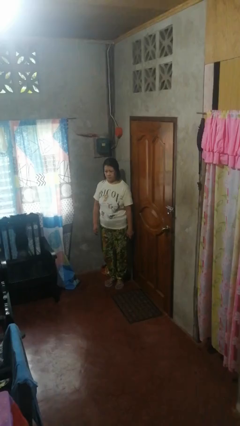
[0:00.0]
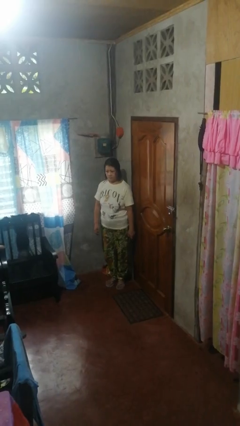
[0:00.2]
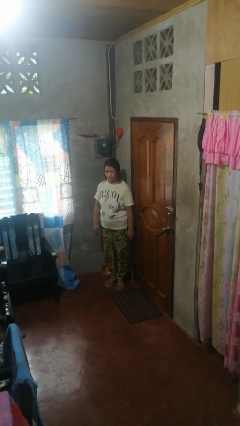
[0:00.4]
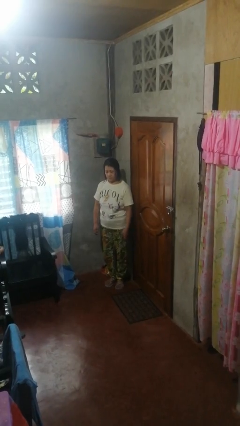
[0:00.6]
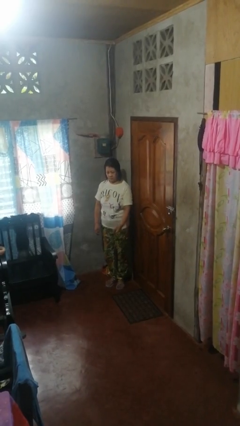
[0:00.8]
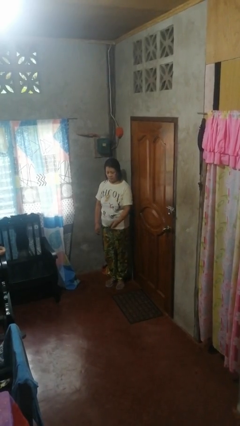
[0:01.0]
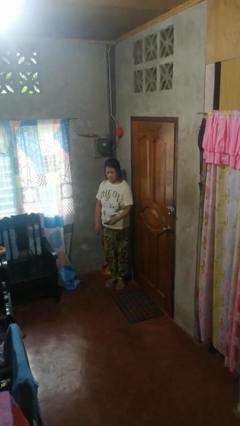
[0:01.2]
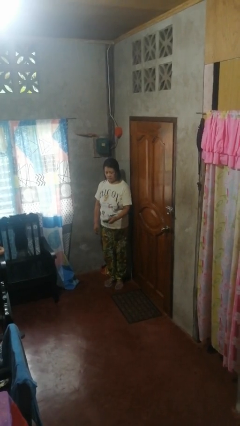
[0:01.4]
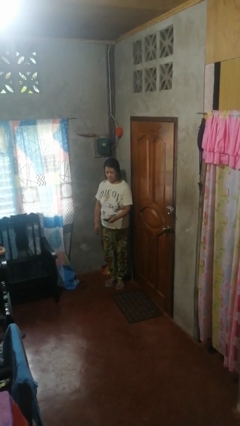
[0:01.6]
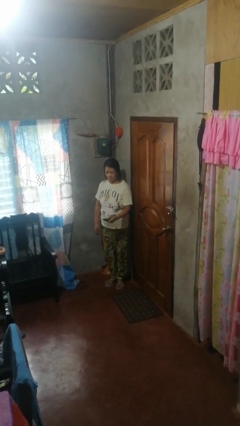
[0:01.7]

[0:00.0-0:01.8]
person uses television remote

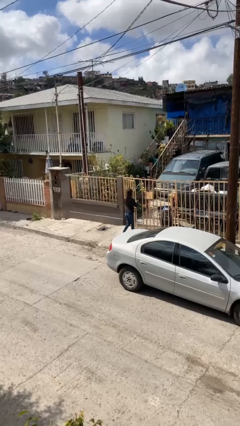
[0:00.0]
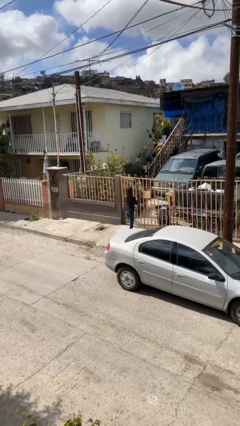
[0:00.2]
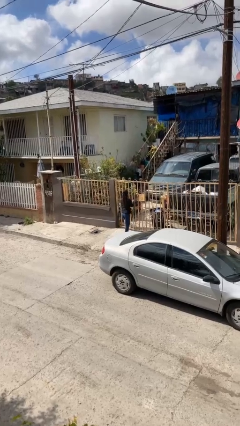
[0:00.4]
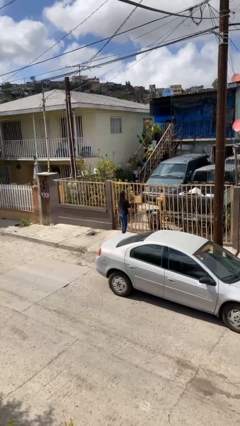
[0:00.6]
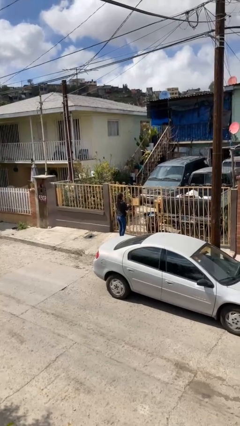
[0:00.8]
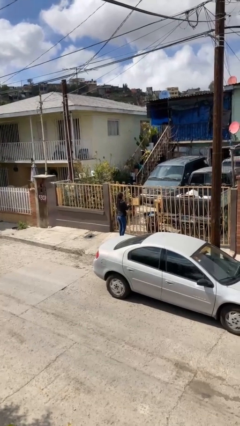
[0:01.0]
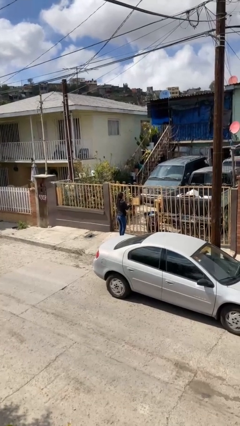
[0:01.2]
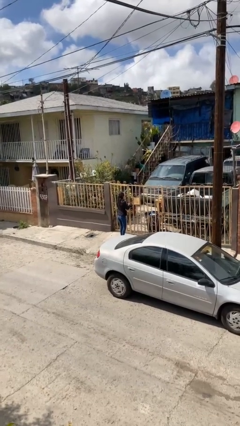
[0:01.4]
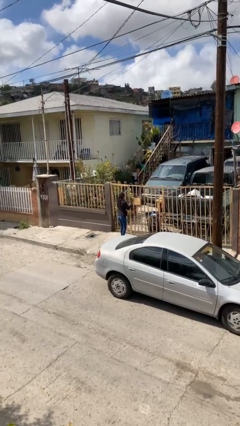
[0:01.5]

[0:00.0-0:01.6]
person closes facility door

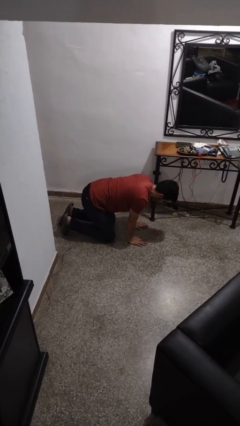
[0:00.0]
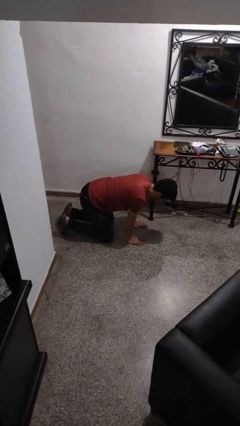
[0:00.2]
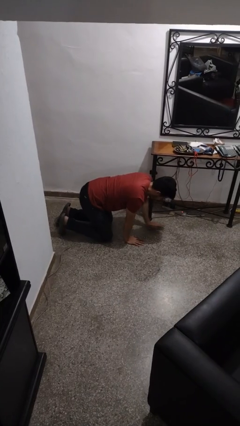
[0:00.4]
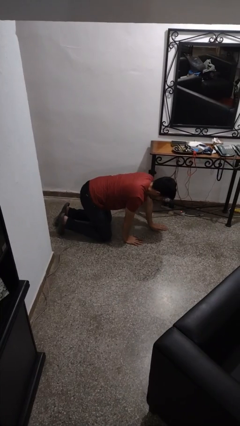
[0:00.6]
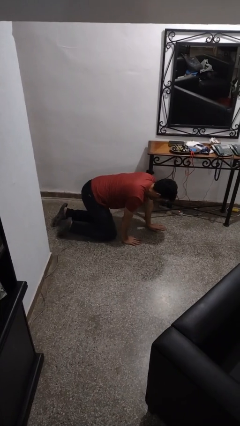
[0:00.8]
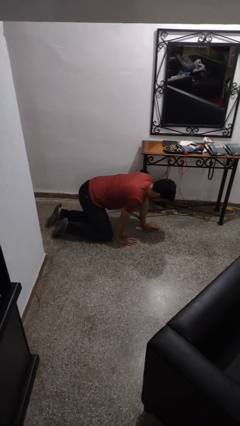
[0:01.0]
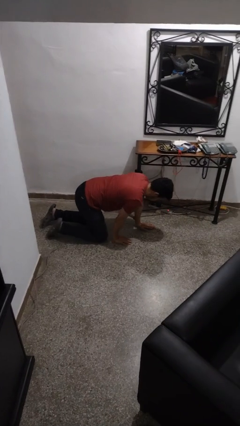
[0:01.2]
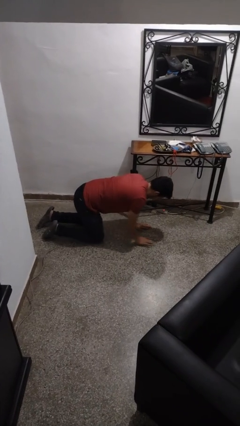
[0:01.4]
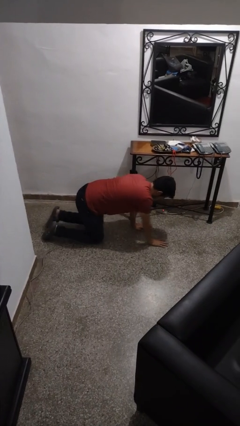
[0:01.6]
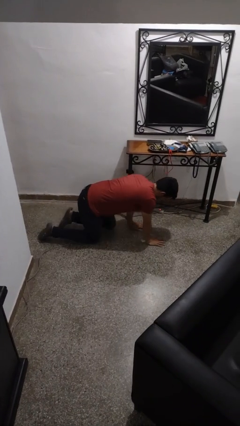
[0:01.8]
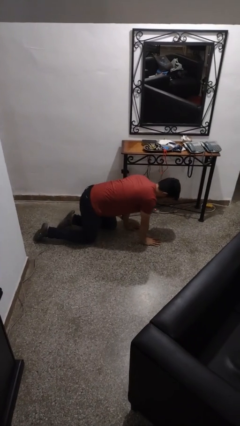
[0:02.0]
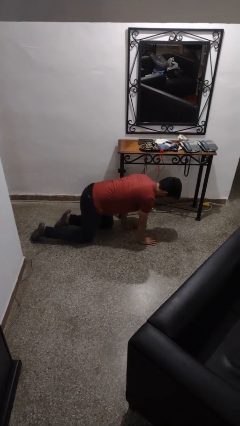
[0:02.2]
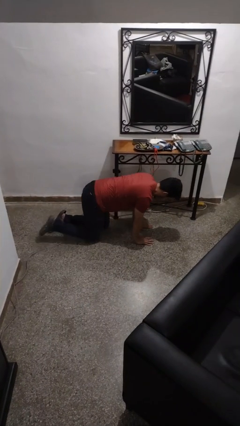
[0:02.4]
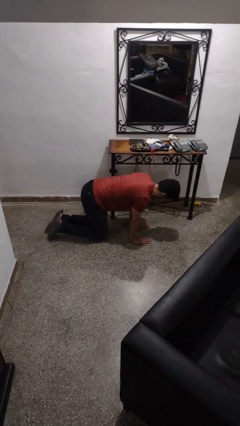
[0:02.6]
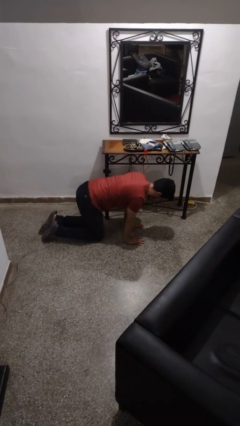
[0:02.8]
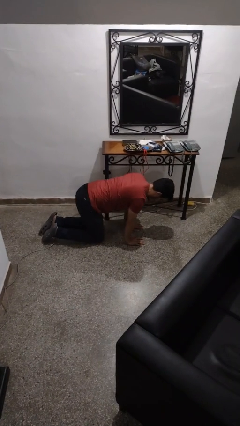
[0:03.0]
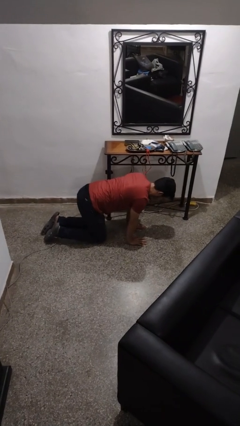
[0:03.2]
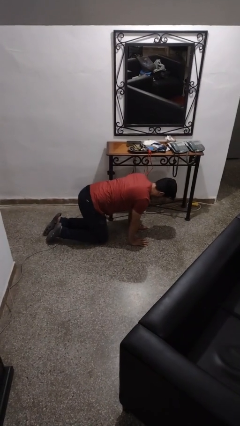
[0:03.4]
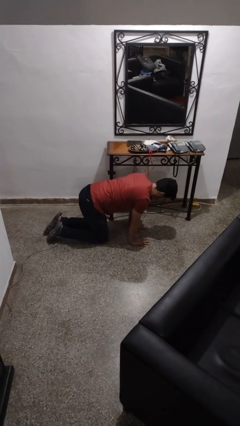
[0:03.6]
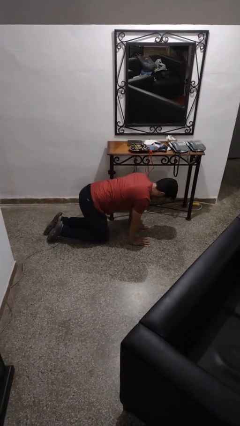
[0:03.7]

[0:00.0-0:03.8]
person crawls

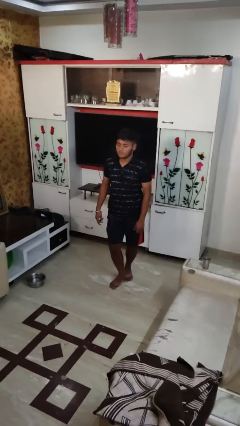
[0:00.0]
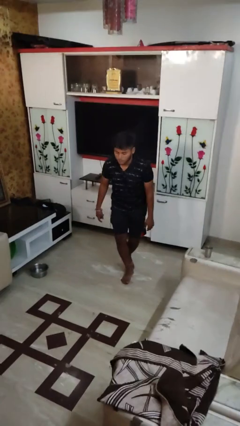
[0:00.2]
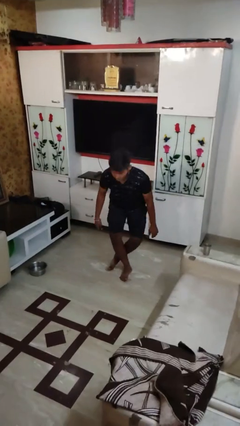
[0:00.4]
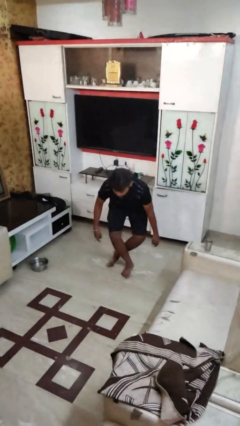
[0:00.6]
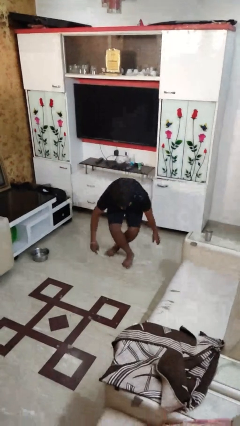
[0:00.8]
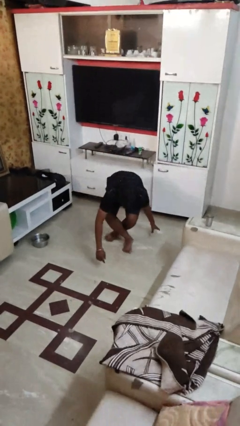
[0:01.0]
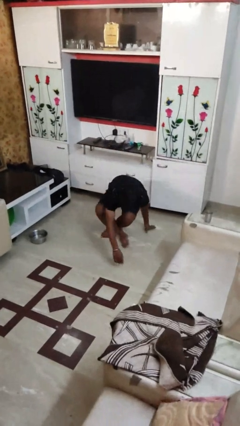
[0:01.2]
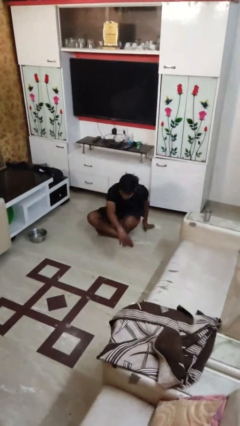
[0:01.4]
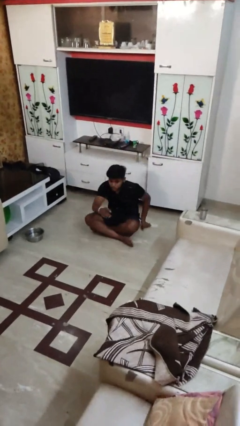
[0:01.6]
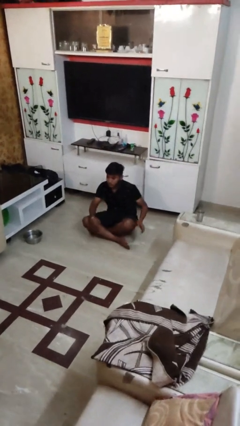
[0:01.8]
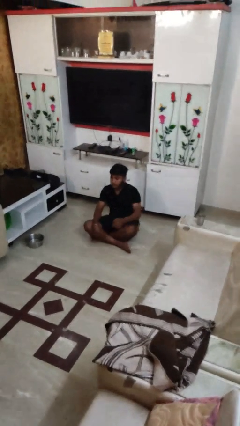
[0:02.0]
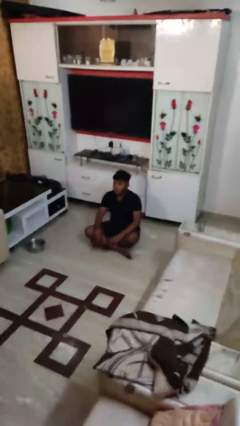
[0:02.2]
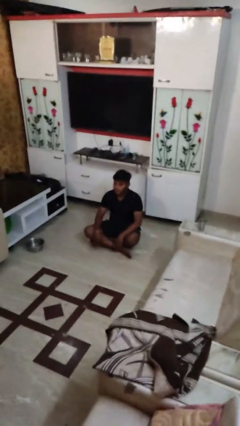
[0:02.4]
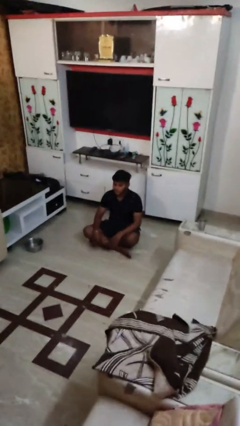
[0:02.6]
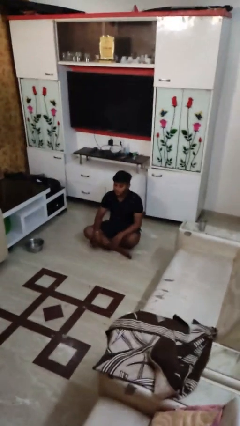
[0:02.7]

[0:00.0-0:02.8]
person sits crisscross

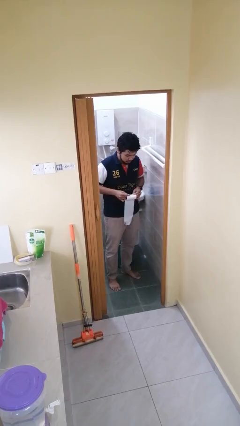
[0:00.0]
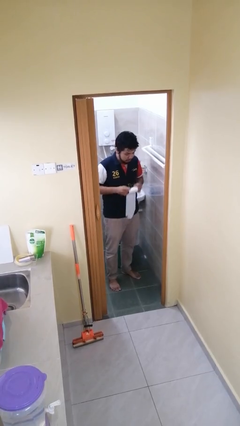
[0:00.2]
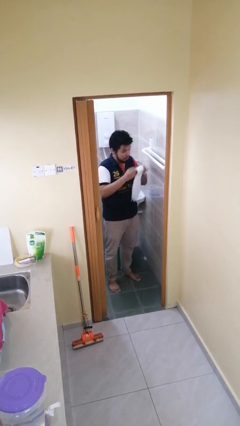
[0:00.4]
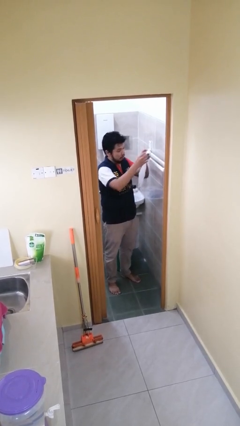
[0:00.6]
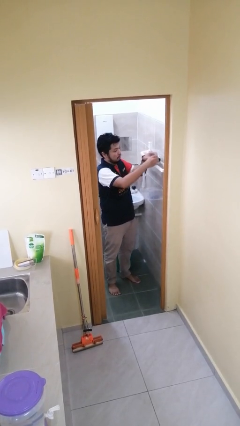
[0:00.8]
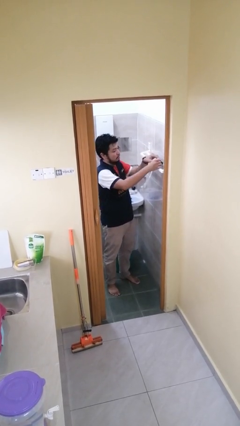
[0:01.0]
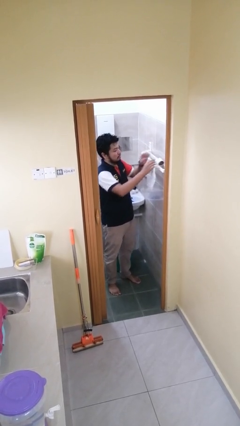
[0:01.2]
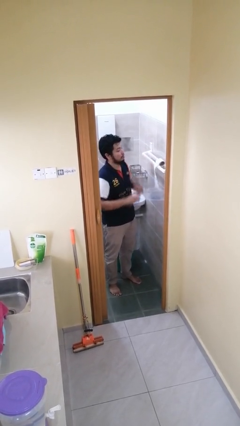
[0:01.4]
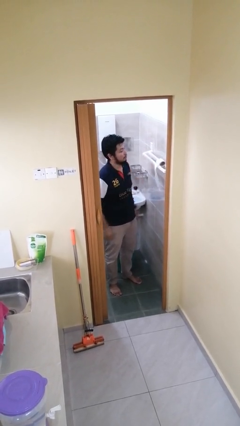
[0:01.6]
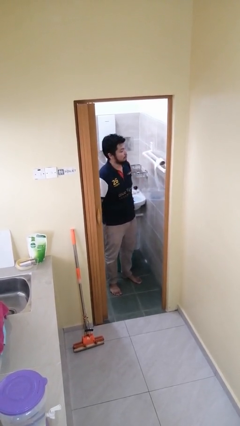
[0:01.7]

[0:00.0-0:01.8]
person puts down object on countertop

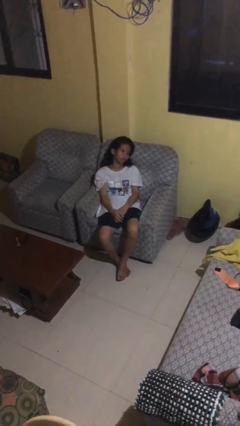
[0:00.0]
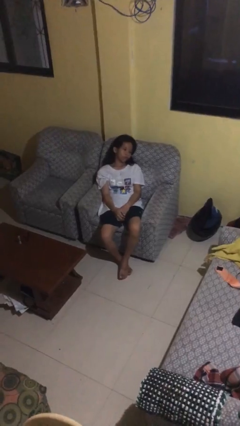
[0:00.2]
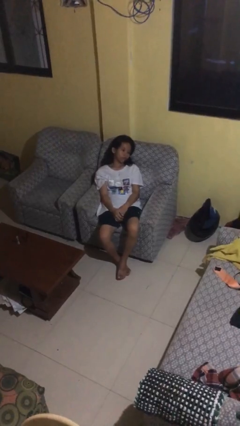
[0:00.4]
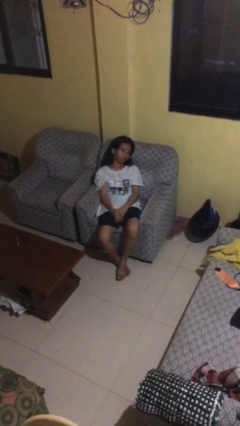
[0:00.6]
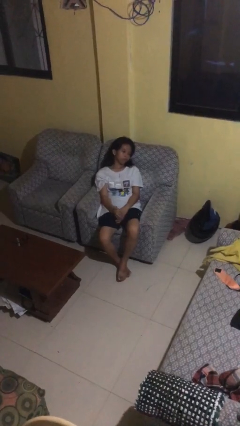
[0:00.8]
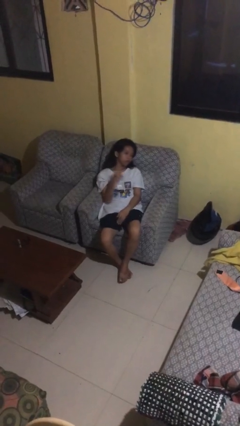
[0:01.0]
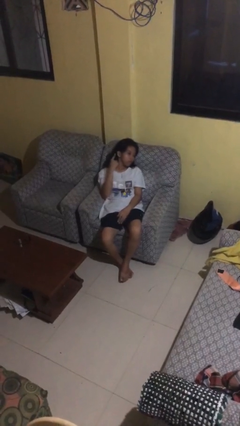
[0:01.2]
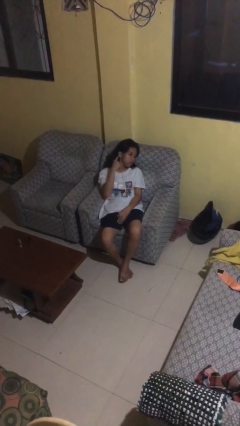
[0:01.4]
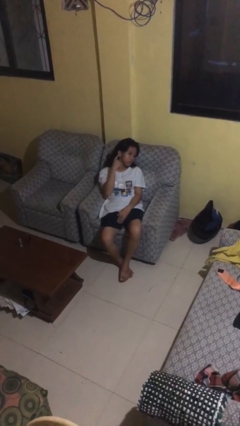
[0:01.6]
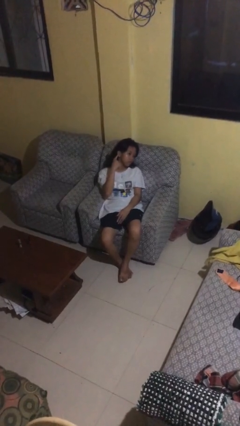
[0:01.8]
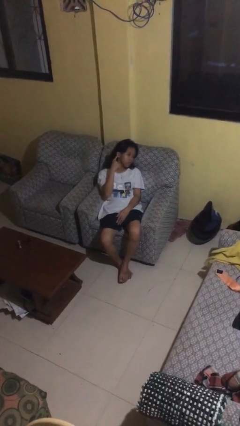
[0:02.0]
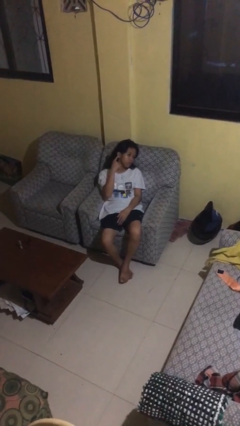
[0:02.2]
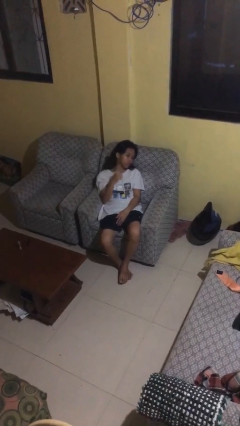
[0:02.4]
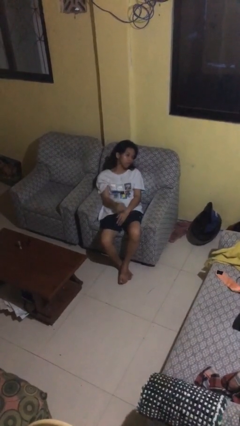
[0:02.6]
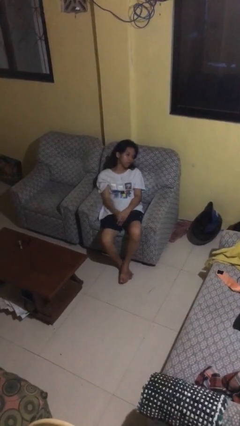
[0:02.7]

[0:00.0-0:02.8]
person gestures listen closely

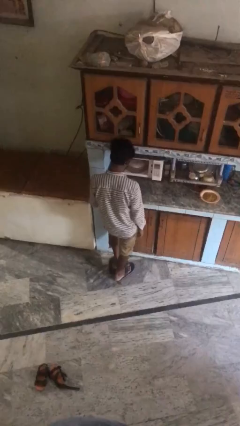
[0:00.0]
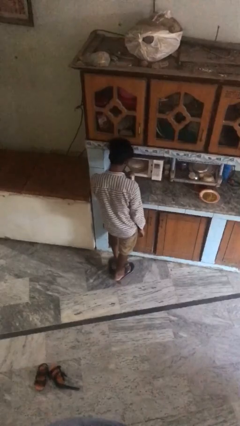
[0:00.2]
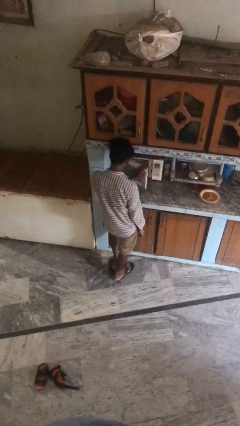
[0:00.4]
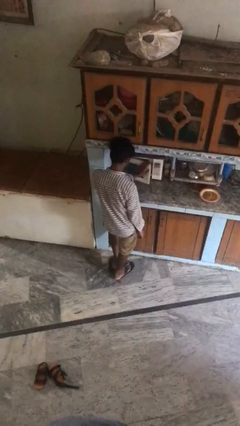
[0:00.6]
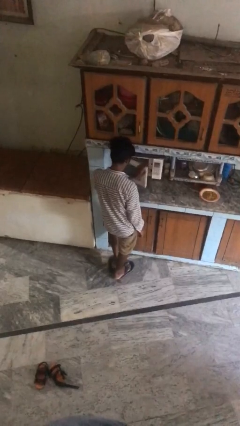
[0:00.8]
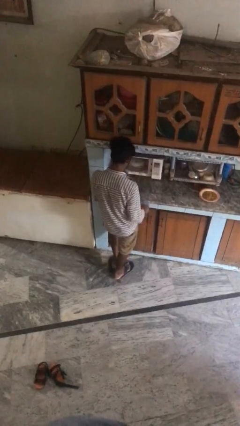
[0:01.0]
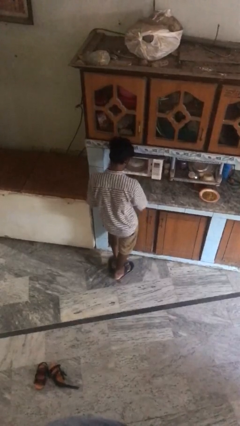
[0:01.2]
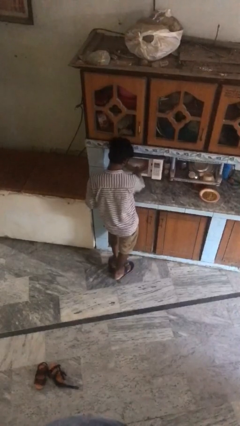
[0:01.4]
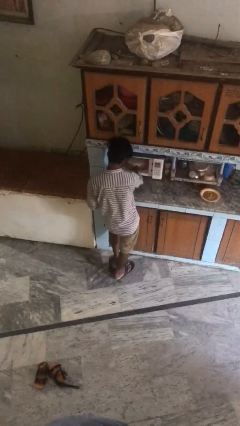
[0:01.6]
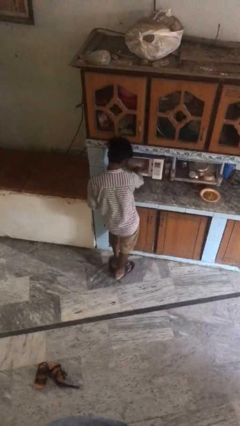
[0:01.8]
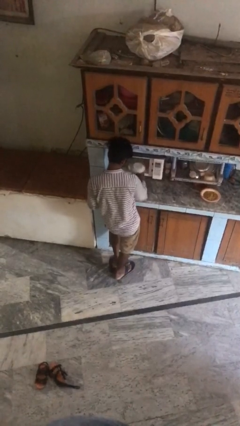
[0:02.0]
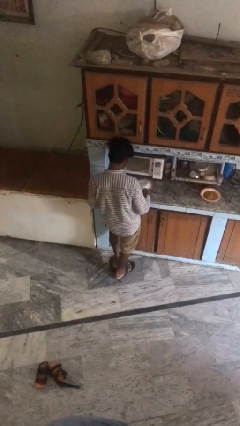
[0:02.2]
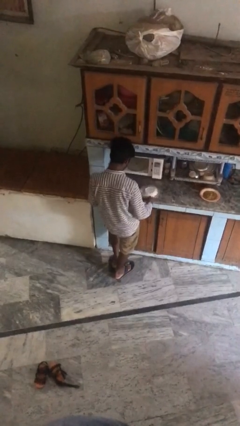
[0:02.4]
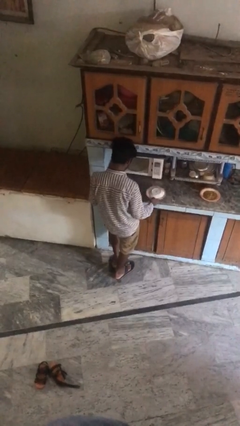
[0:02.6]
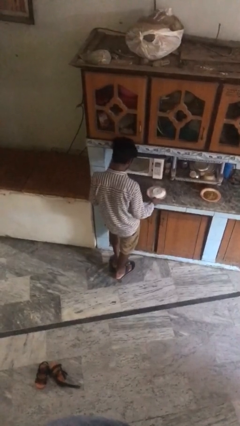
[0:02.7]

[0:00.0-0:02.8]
person takes object from oven
